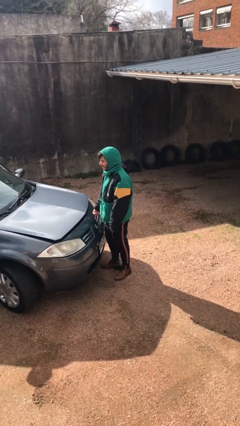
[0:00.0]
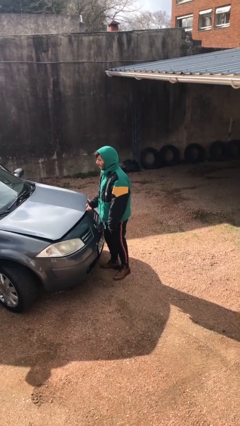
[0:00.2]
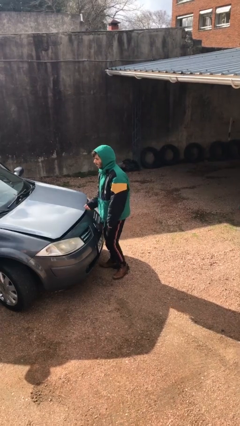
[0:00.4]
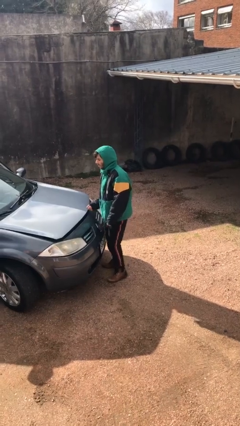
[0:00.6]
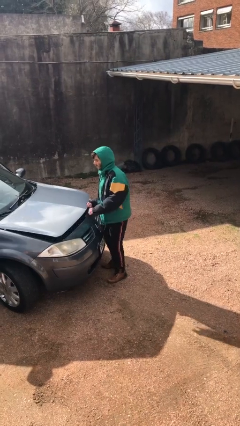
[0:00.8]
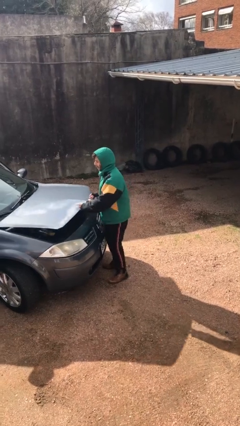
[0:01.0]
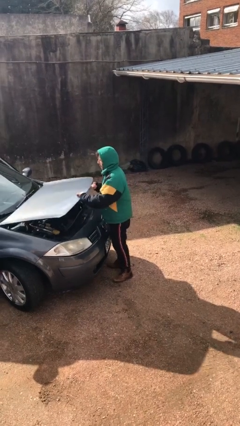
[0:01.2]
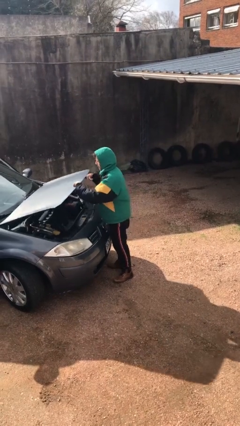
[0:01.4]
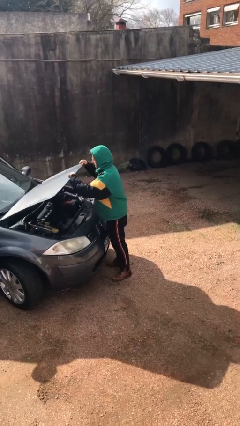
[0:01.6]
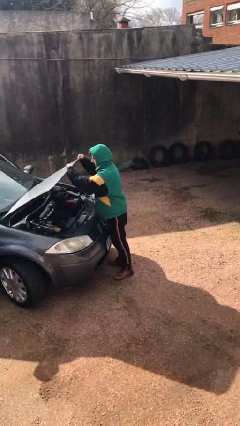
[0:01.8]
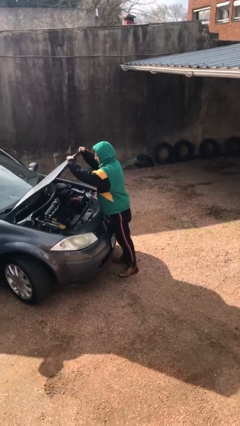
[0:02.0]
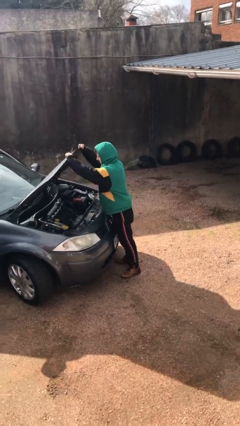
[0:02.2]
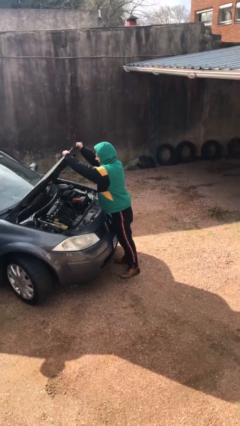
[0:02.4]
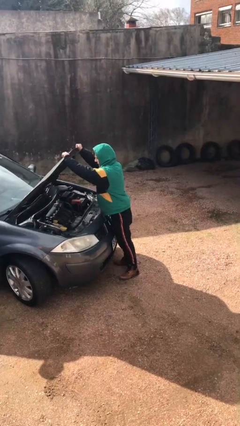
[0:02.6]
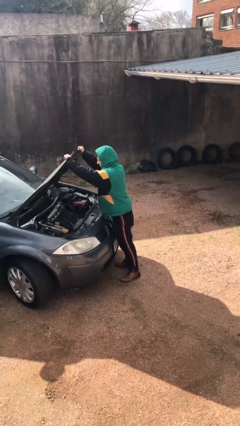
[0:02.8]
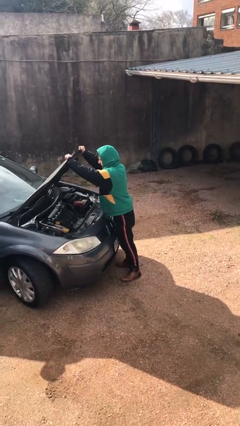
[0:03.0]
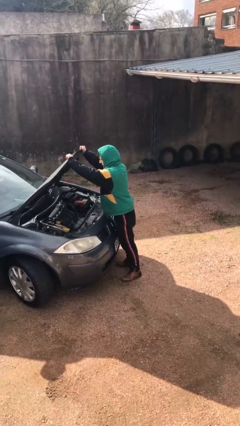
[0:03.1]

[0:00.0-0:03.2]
person opens car hood

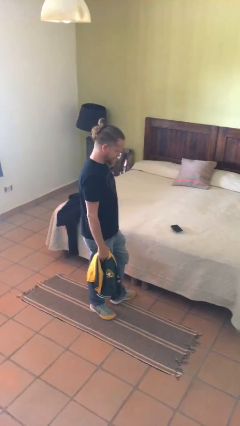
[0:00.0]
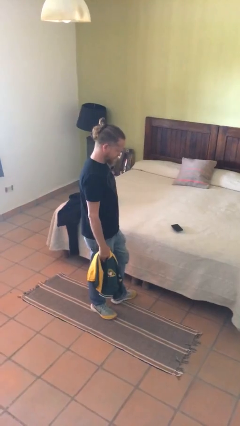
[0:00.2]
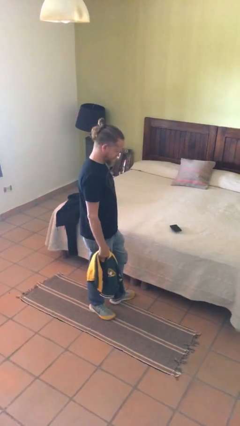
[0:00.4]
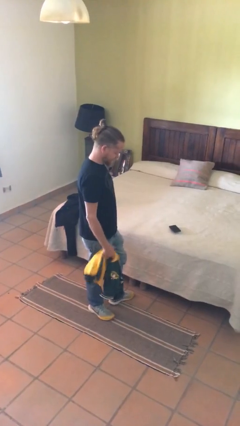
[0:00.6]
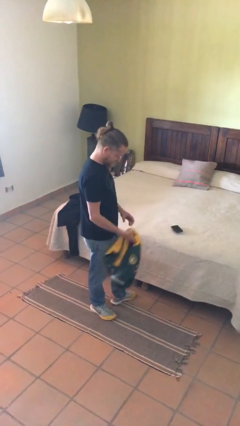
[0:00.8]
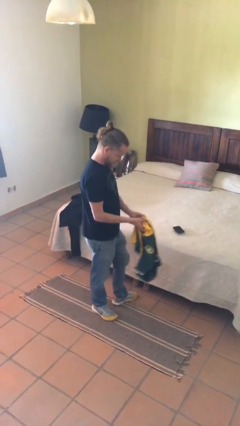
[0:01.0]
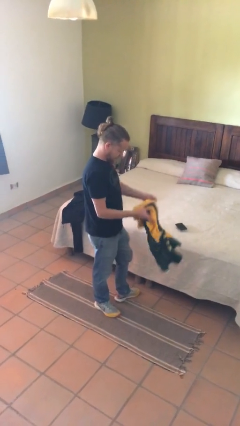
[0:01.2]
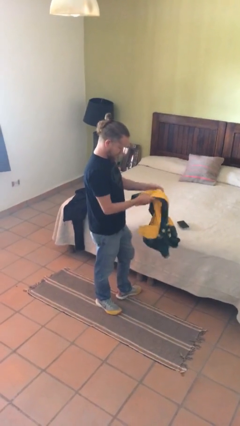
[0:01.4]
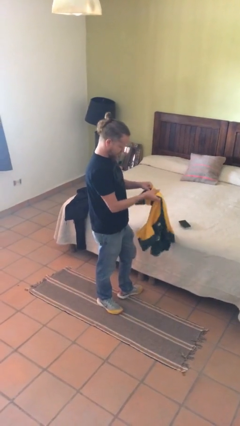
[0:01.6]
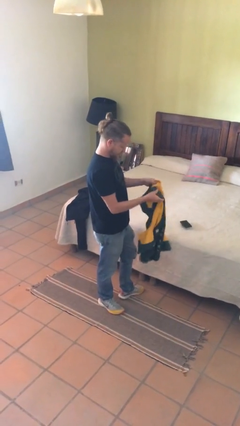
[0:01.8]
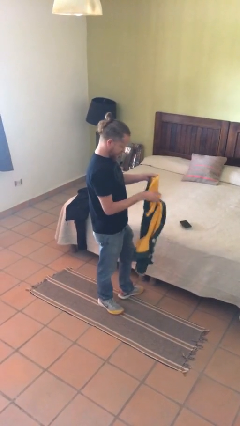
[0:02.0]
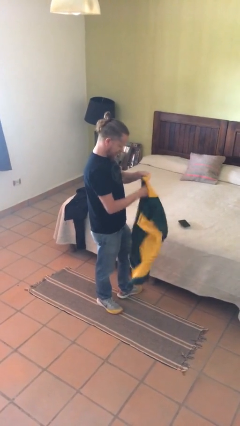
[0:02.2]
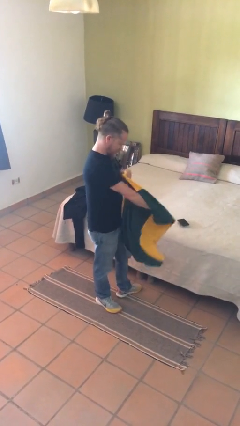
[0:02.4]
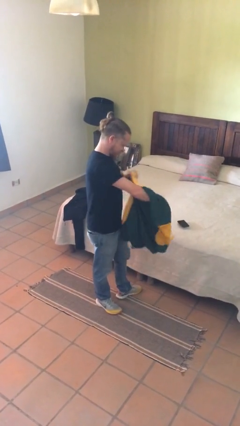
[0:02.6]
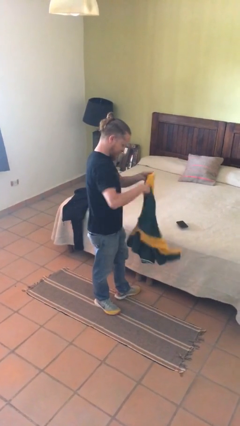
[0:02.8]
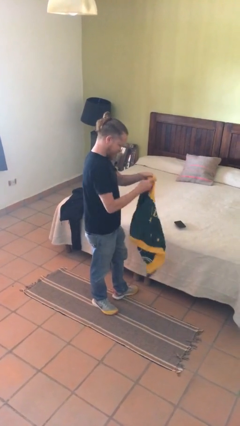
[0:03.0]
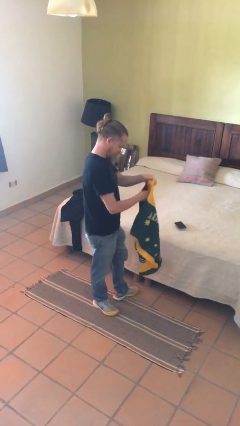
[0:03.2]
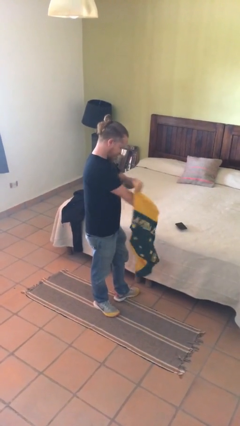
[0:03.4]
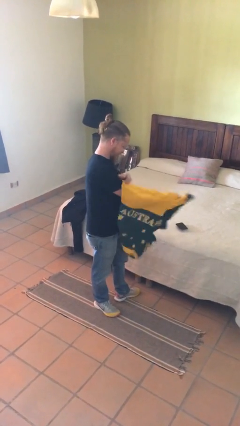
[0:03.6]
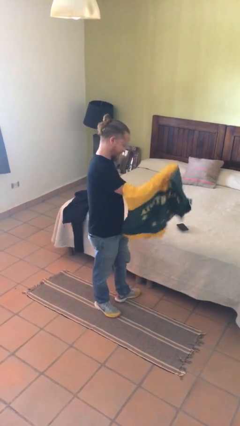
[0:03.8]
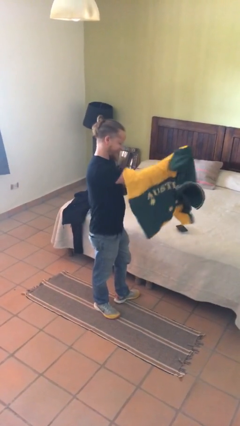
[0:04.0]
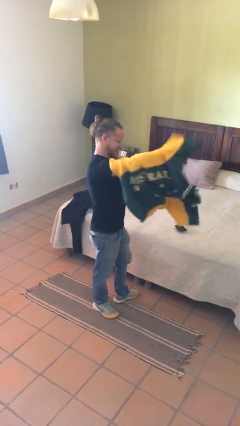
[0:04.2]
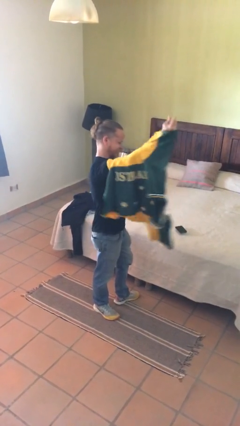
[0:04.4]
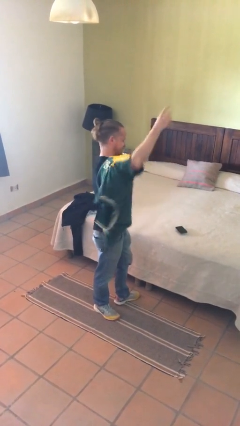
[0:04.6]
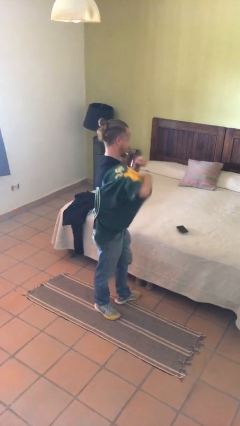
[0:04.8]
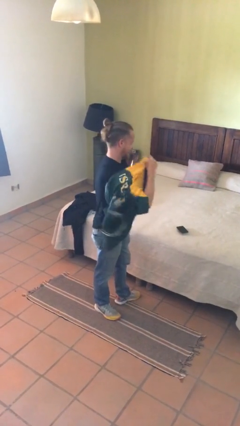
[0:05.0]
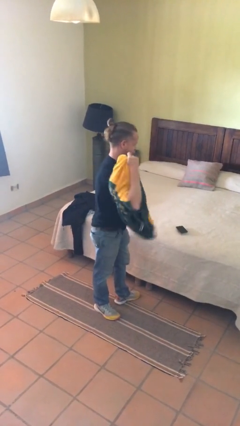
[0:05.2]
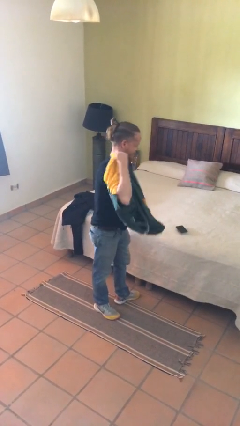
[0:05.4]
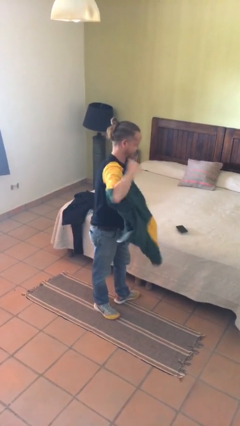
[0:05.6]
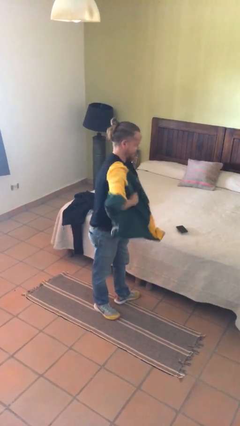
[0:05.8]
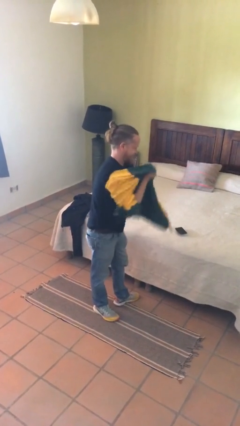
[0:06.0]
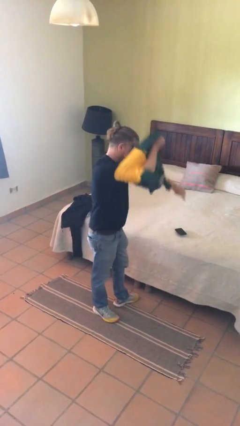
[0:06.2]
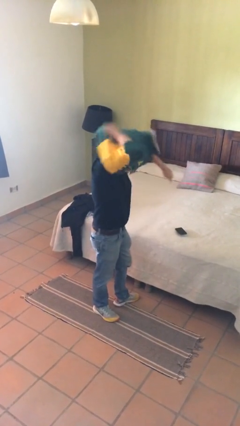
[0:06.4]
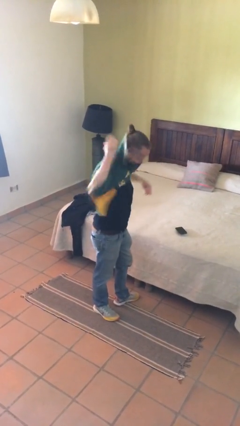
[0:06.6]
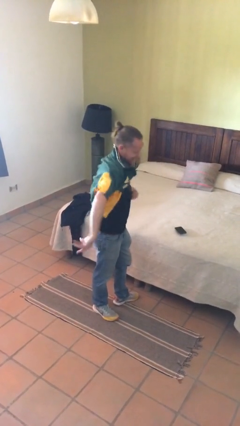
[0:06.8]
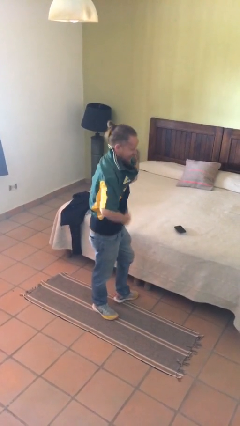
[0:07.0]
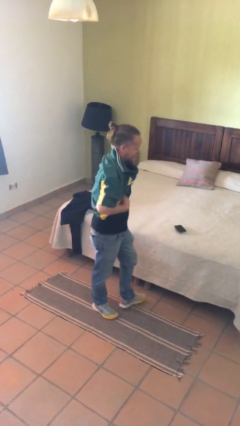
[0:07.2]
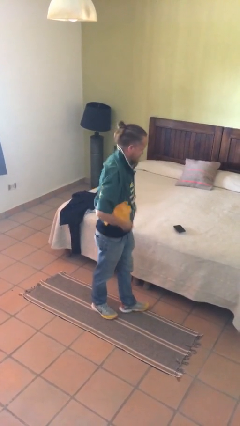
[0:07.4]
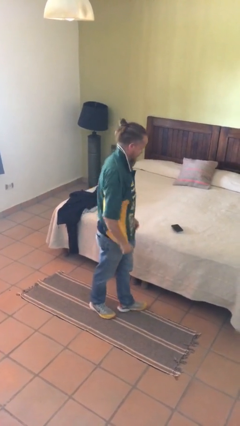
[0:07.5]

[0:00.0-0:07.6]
person puts on shirt

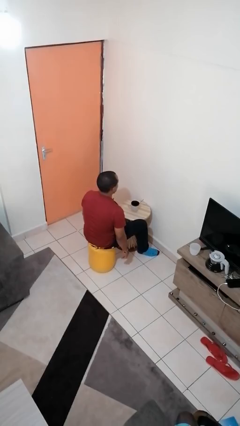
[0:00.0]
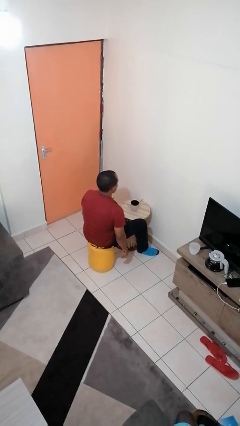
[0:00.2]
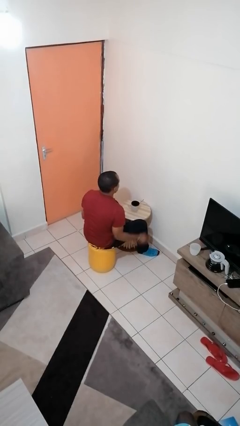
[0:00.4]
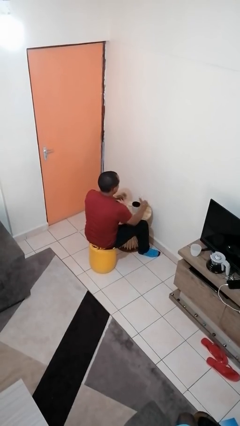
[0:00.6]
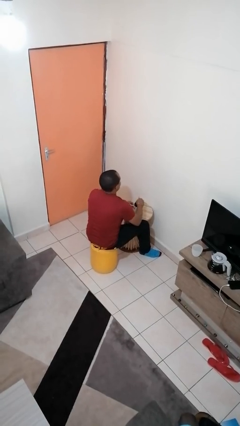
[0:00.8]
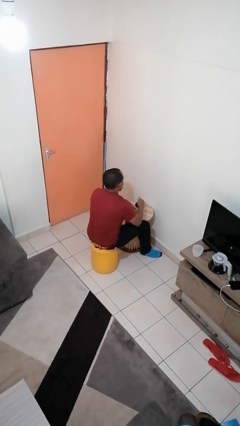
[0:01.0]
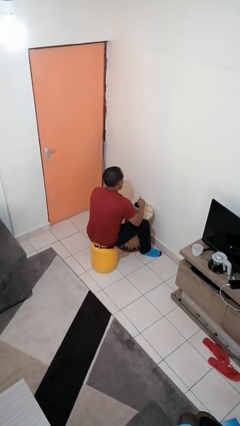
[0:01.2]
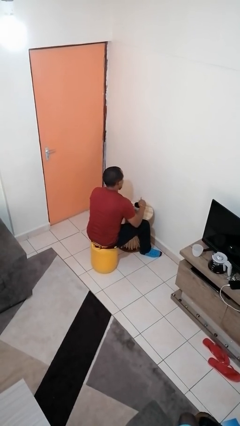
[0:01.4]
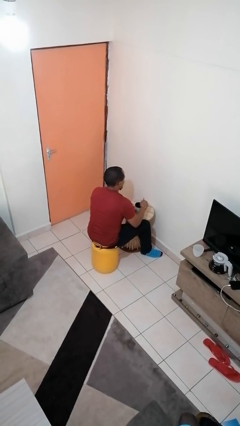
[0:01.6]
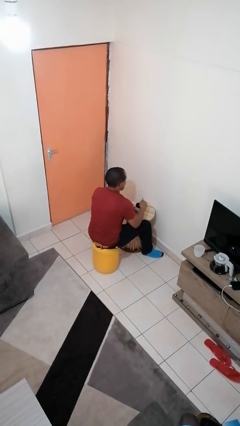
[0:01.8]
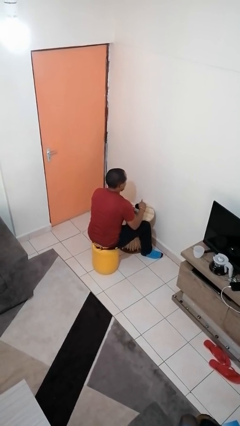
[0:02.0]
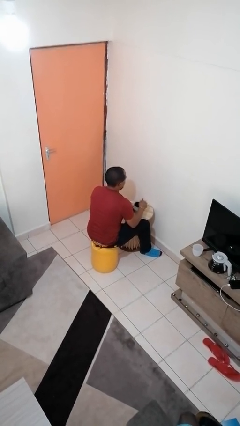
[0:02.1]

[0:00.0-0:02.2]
person stirs mug

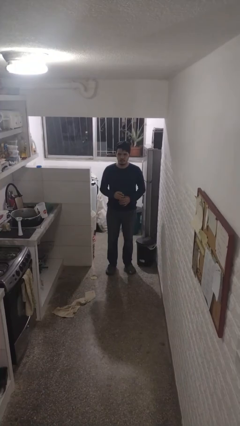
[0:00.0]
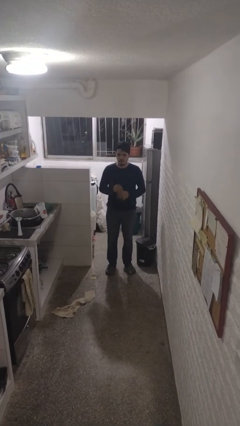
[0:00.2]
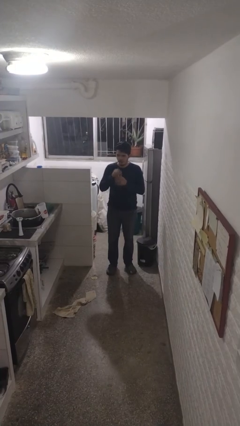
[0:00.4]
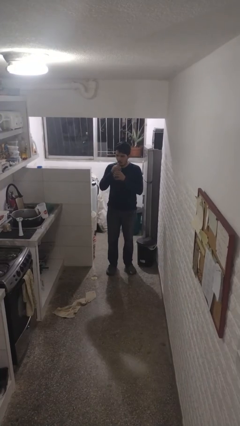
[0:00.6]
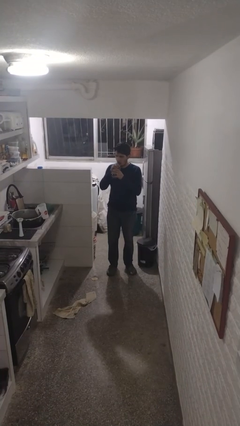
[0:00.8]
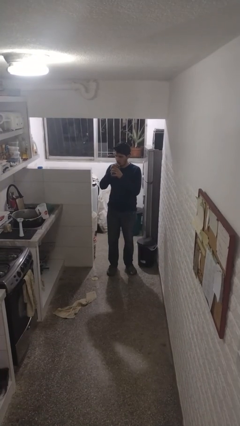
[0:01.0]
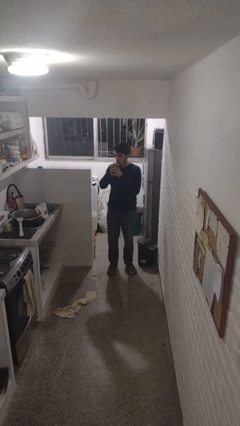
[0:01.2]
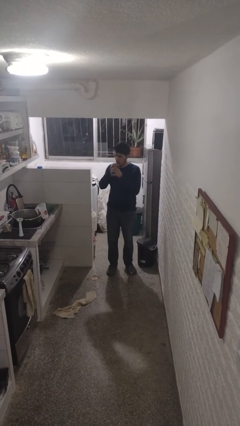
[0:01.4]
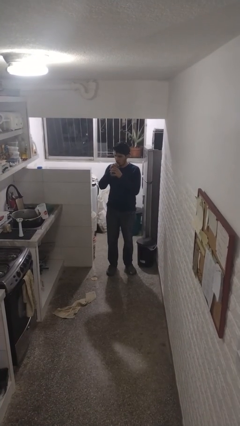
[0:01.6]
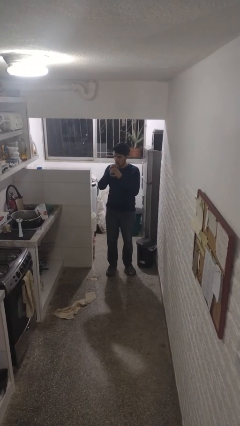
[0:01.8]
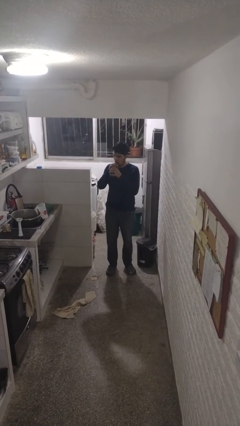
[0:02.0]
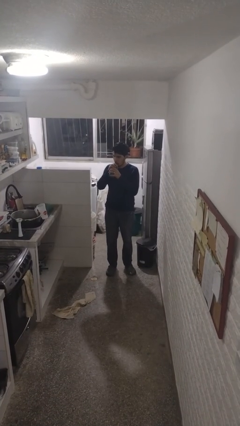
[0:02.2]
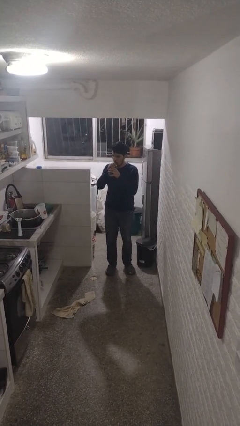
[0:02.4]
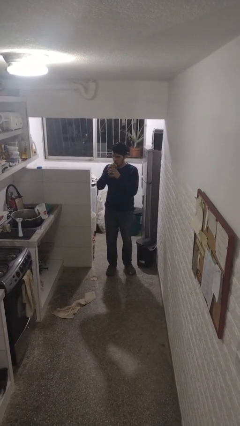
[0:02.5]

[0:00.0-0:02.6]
person drinks from straw

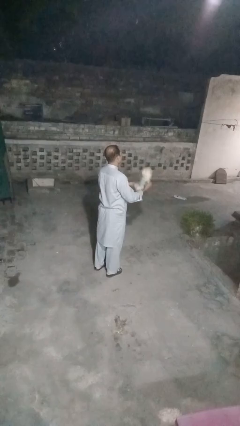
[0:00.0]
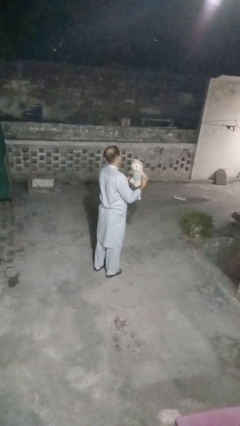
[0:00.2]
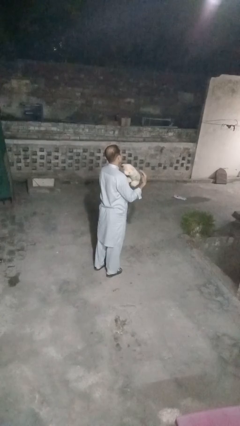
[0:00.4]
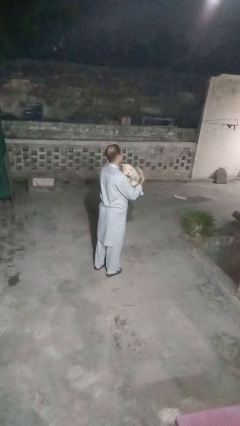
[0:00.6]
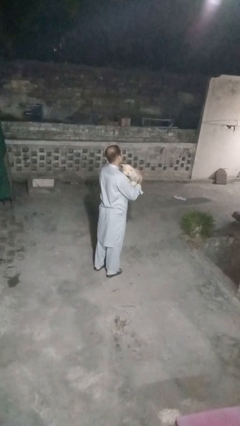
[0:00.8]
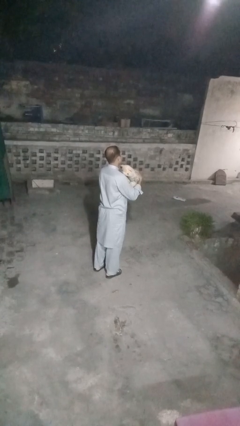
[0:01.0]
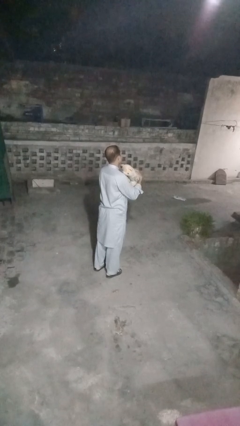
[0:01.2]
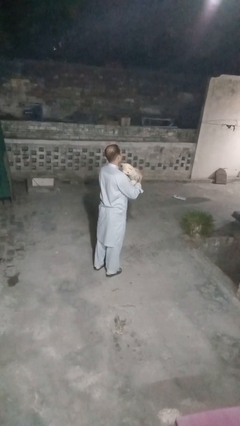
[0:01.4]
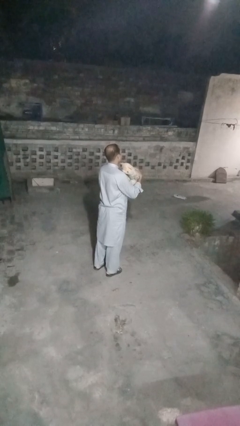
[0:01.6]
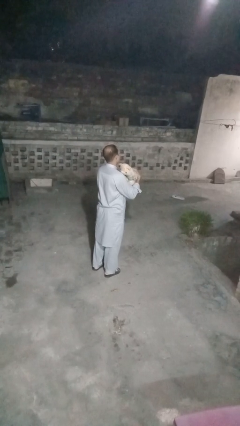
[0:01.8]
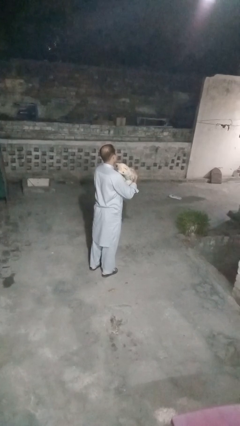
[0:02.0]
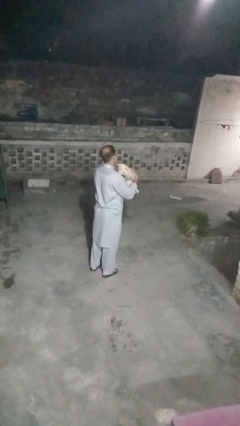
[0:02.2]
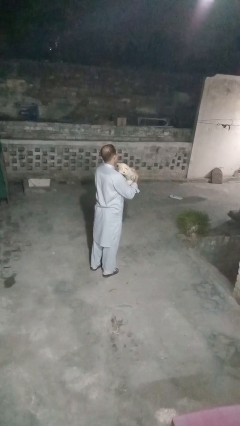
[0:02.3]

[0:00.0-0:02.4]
person hugs stuffed animal
